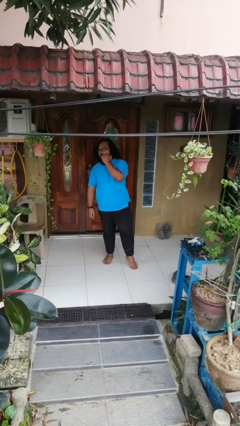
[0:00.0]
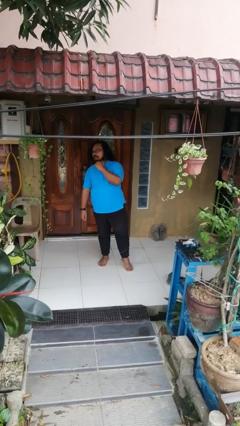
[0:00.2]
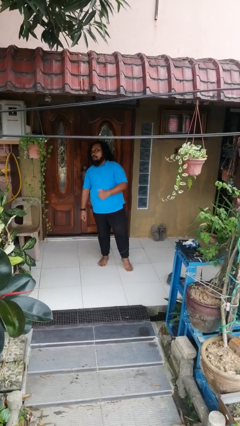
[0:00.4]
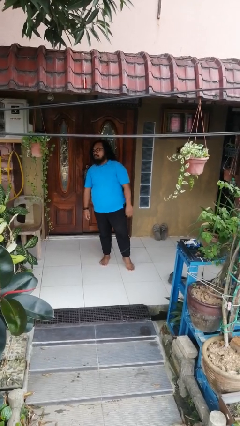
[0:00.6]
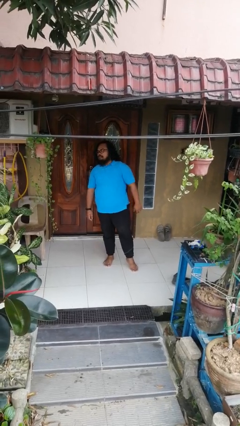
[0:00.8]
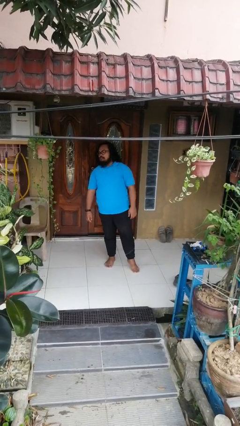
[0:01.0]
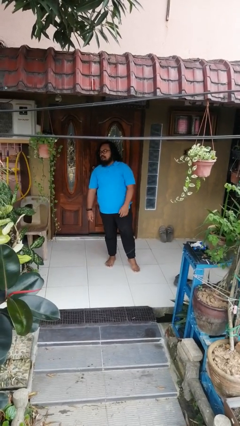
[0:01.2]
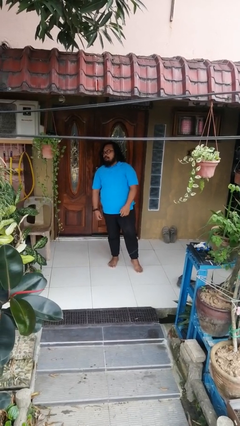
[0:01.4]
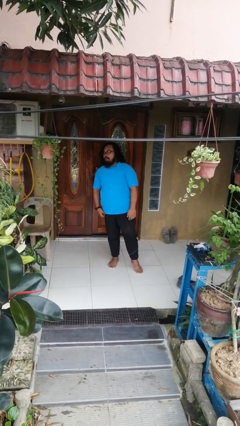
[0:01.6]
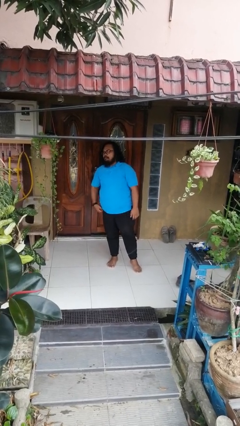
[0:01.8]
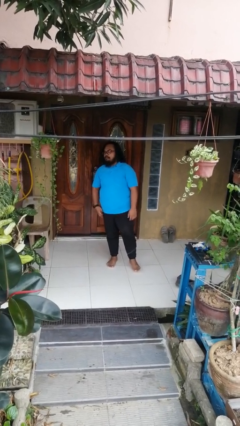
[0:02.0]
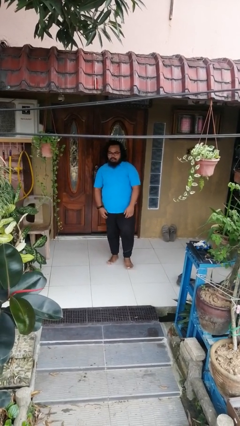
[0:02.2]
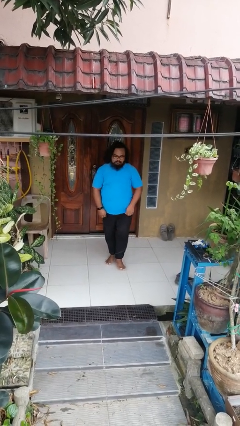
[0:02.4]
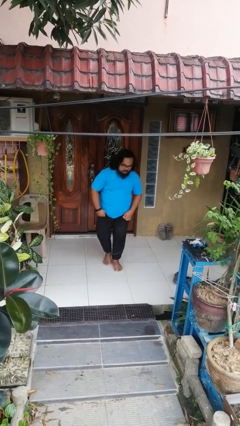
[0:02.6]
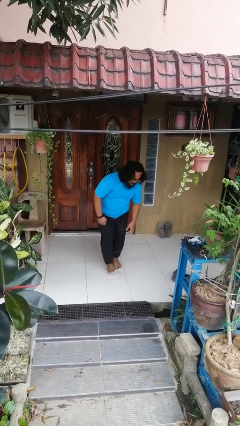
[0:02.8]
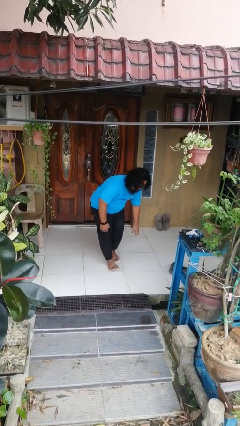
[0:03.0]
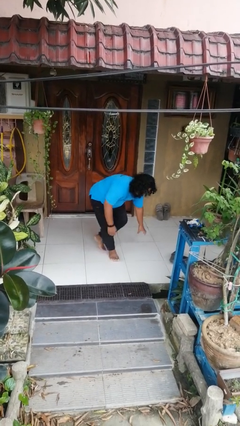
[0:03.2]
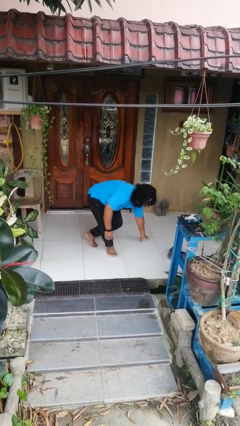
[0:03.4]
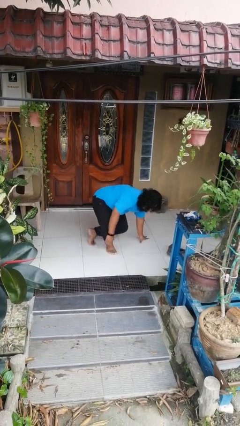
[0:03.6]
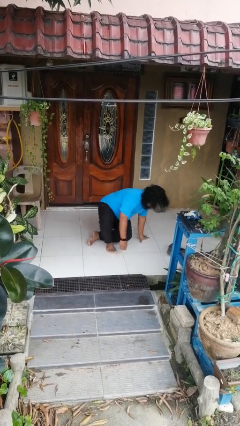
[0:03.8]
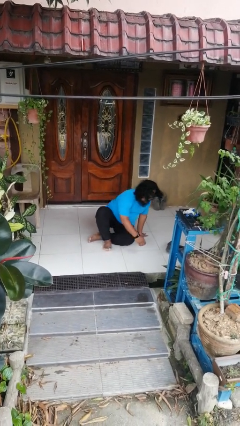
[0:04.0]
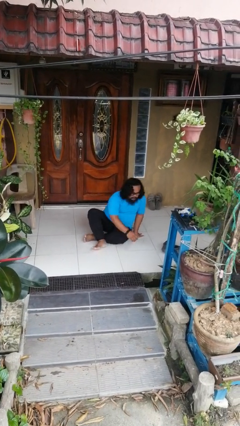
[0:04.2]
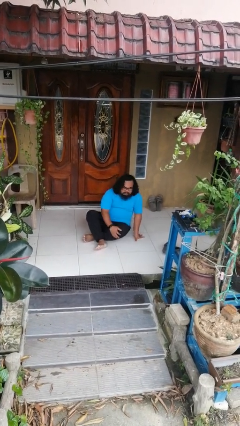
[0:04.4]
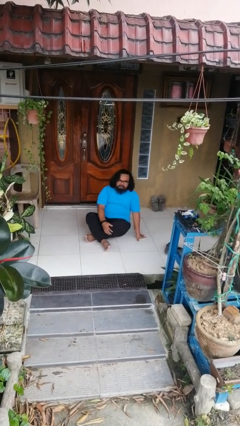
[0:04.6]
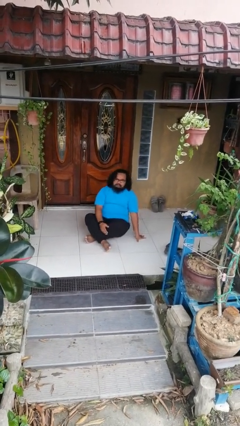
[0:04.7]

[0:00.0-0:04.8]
person sits crisscross

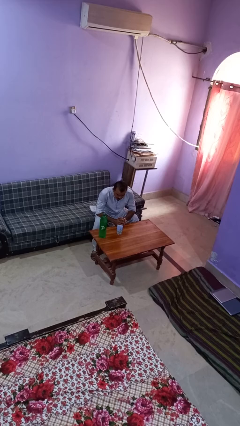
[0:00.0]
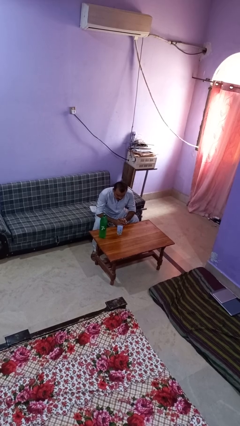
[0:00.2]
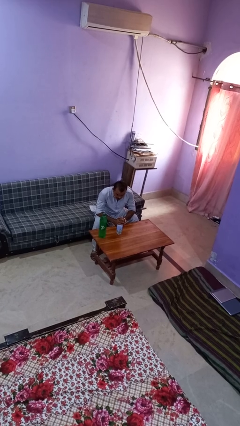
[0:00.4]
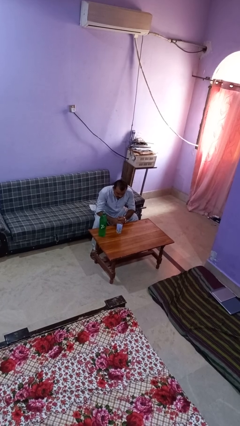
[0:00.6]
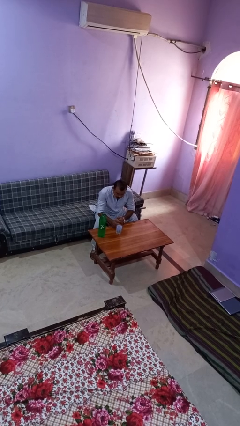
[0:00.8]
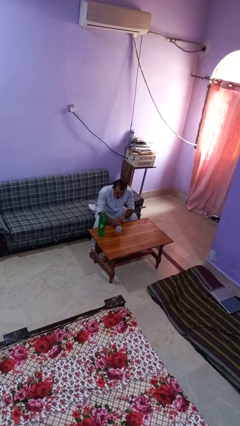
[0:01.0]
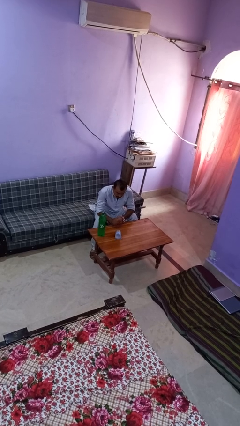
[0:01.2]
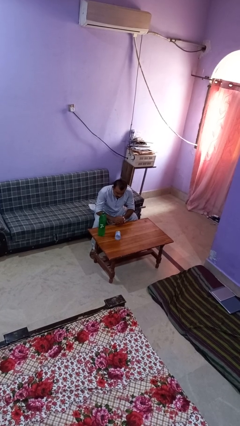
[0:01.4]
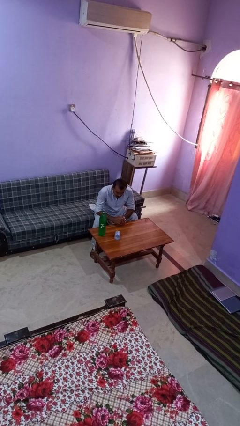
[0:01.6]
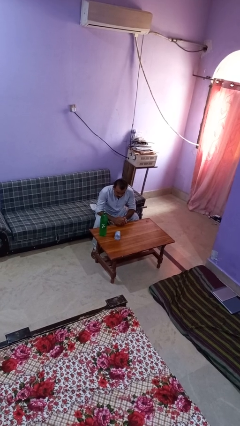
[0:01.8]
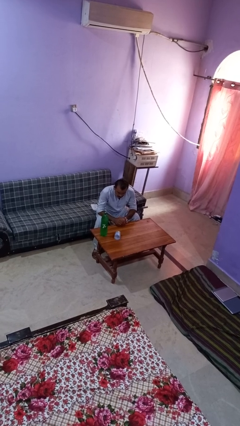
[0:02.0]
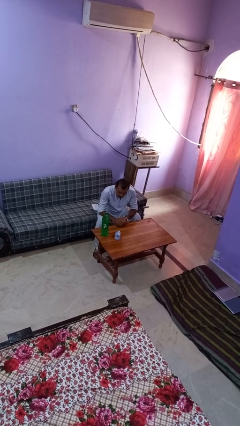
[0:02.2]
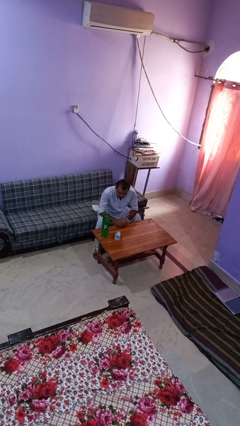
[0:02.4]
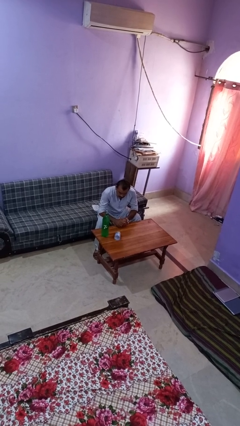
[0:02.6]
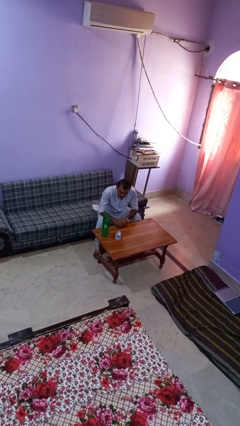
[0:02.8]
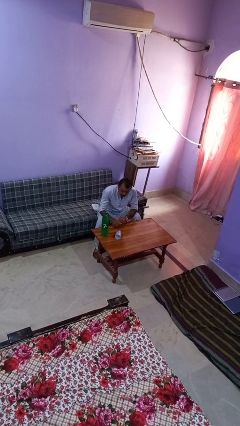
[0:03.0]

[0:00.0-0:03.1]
person knocks over glass

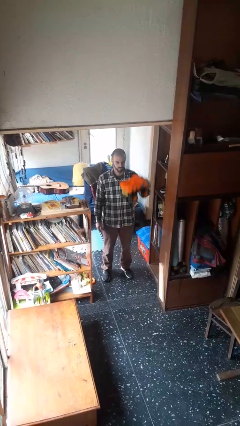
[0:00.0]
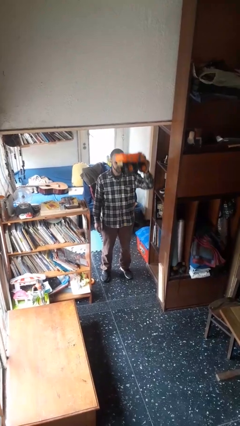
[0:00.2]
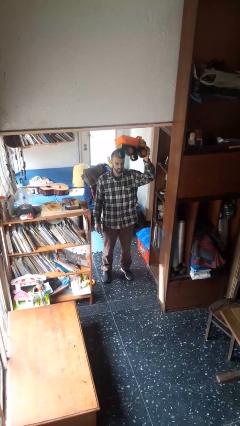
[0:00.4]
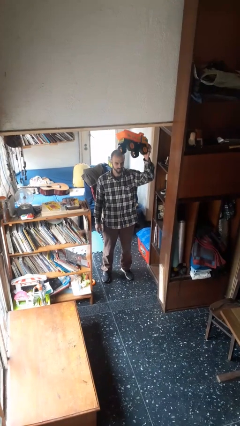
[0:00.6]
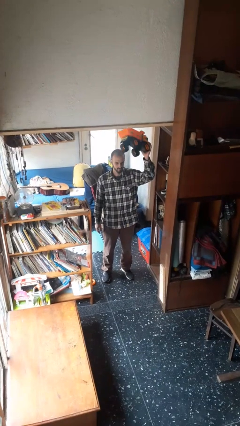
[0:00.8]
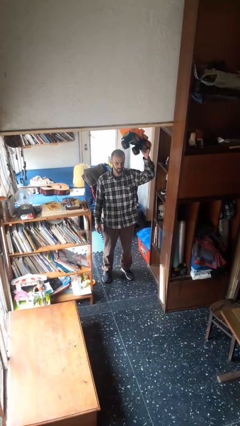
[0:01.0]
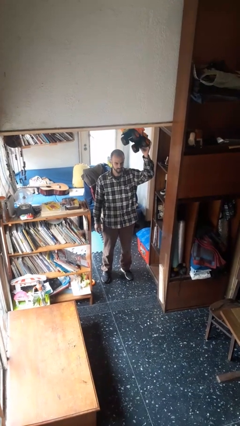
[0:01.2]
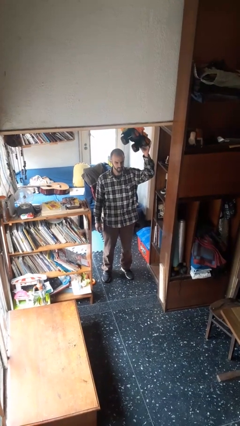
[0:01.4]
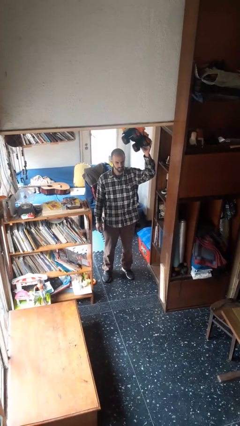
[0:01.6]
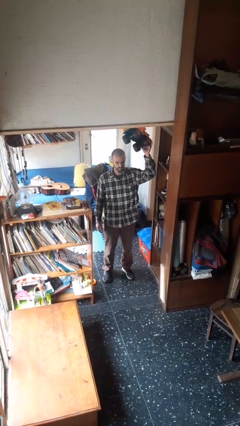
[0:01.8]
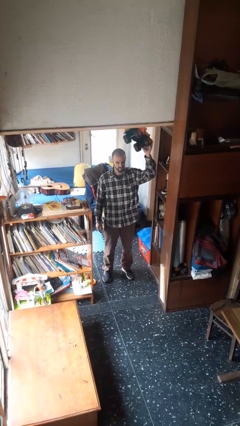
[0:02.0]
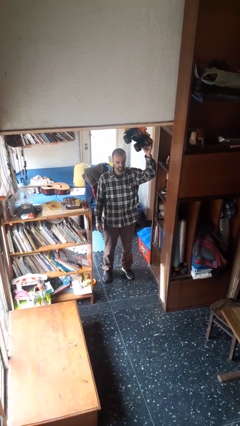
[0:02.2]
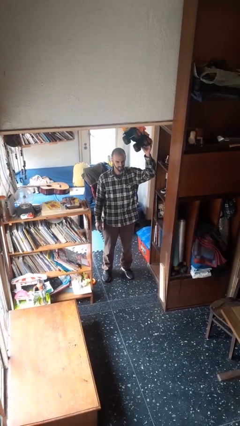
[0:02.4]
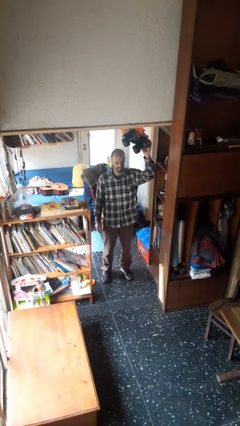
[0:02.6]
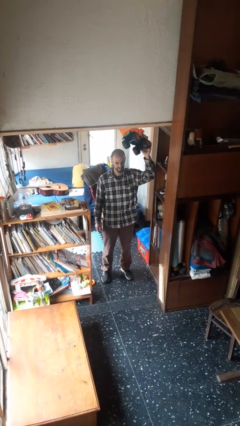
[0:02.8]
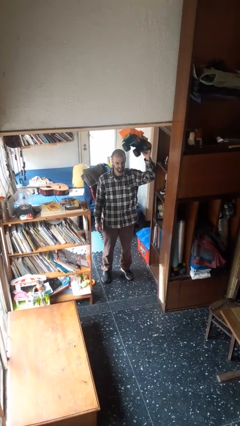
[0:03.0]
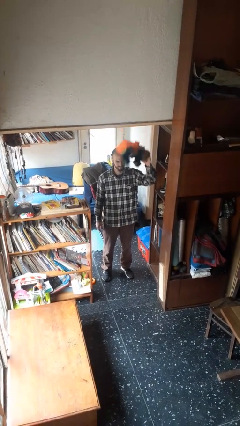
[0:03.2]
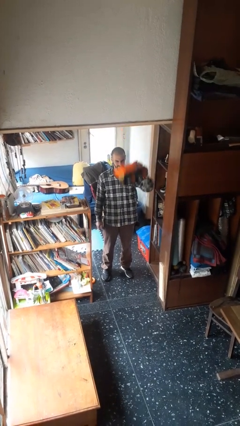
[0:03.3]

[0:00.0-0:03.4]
person holds object above head

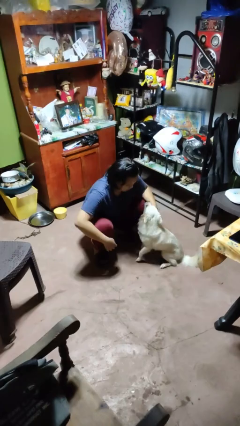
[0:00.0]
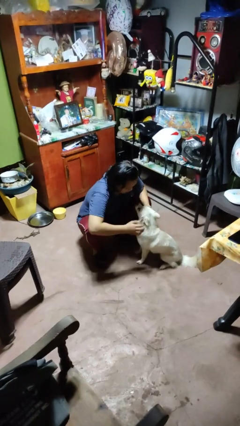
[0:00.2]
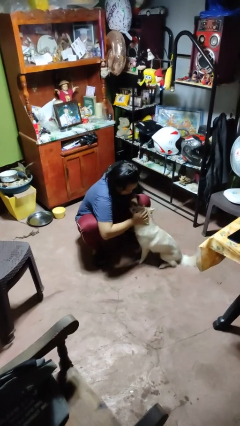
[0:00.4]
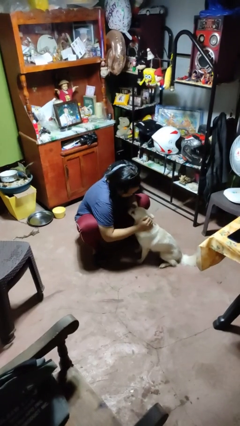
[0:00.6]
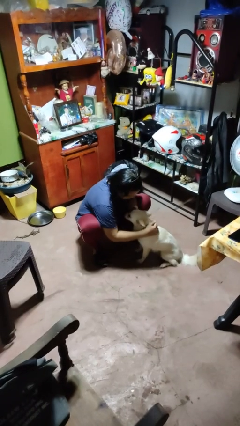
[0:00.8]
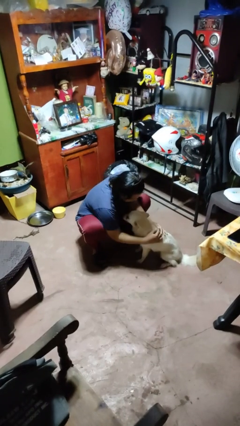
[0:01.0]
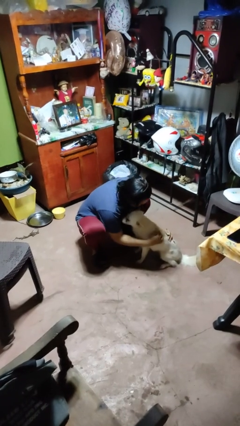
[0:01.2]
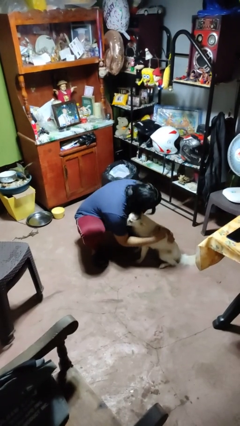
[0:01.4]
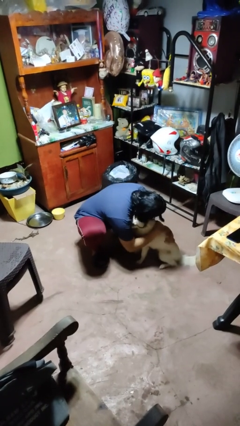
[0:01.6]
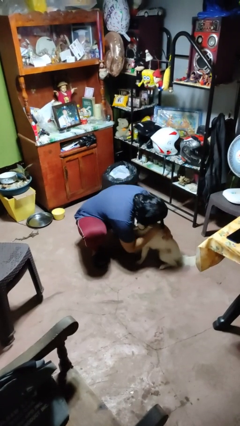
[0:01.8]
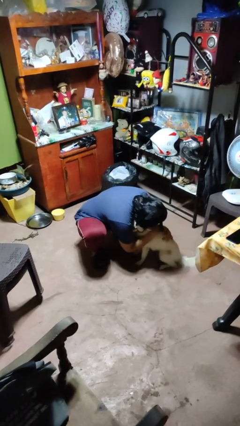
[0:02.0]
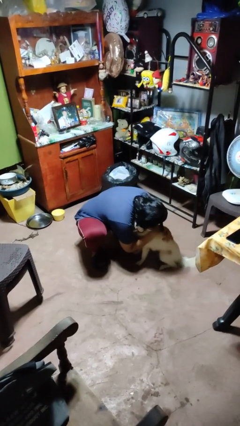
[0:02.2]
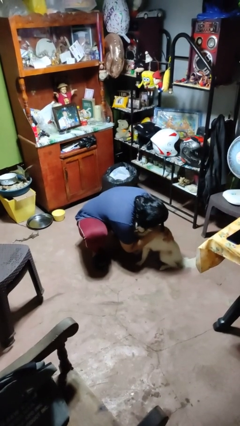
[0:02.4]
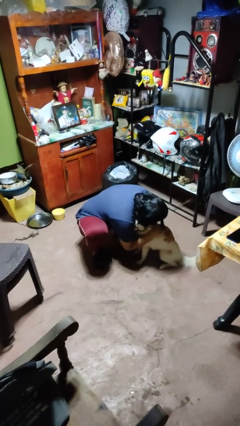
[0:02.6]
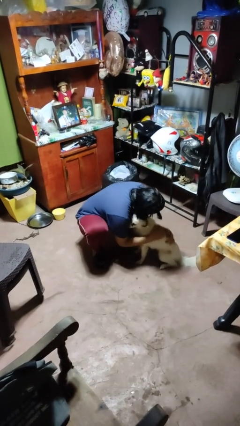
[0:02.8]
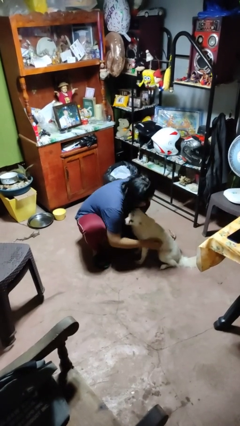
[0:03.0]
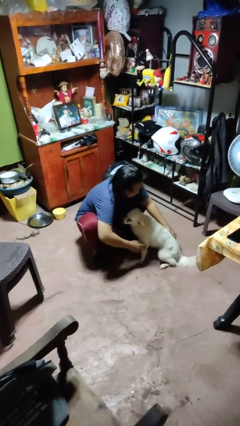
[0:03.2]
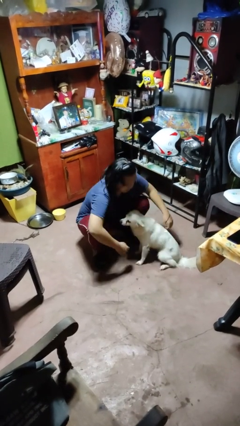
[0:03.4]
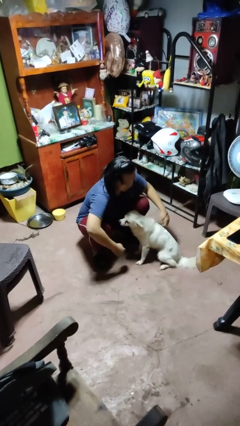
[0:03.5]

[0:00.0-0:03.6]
person hugs dog

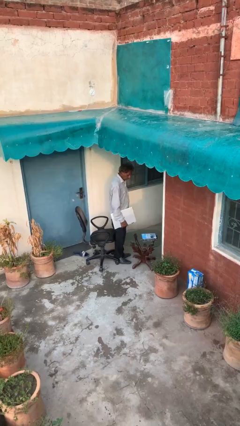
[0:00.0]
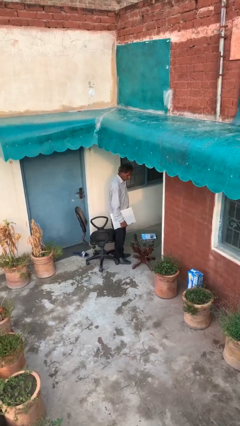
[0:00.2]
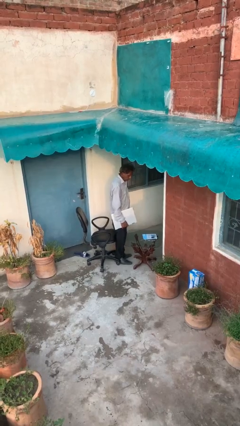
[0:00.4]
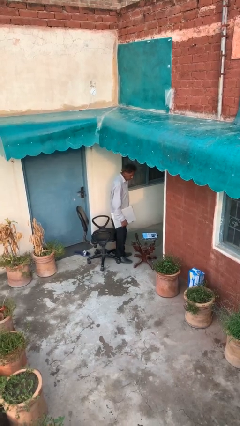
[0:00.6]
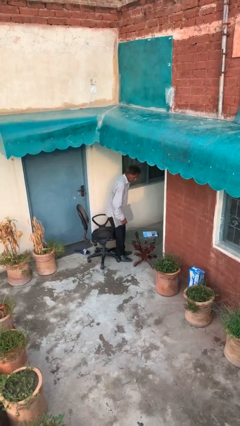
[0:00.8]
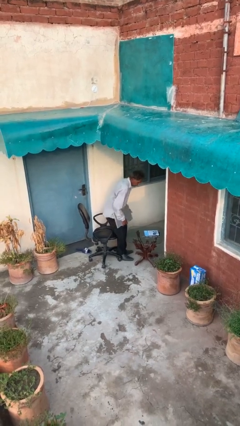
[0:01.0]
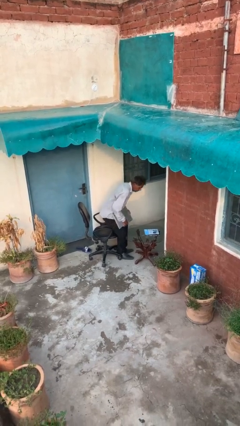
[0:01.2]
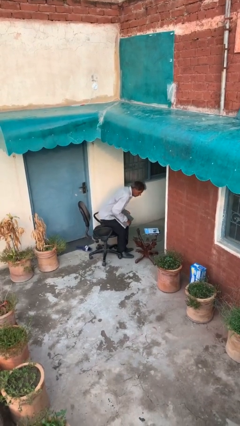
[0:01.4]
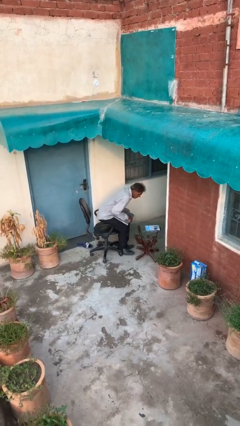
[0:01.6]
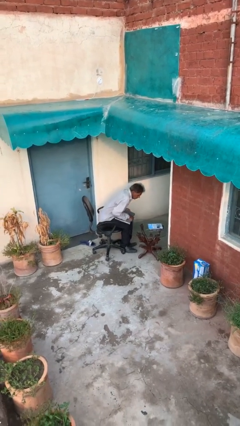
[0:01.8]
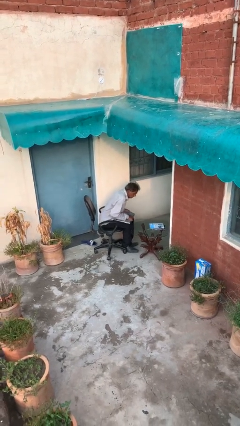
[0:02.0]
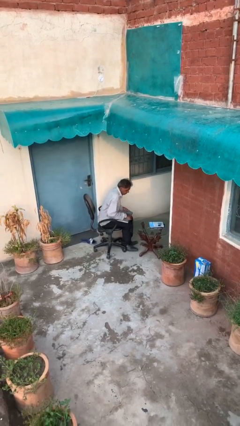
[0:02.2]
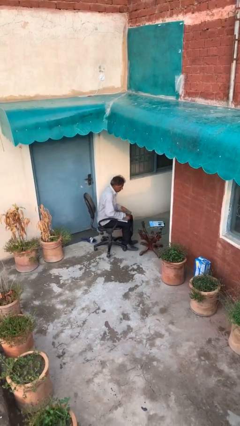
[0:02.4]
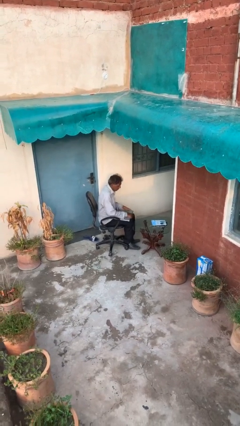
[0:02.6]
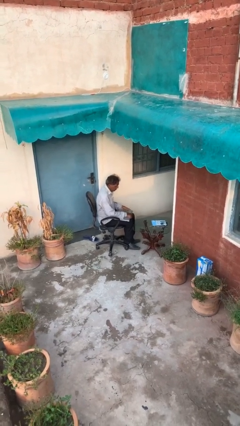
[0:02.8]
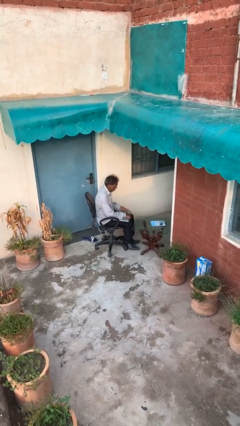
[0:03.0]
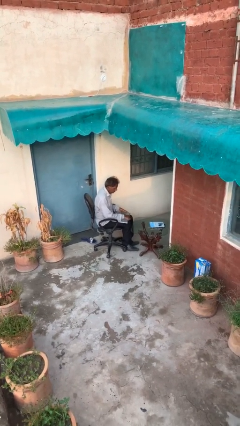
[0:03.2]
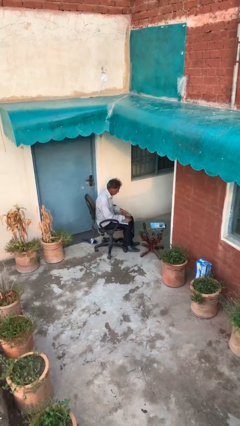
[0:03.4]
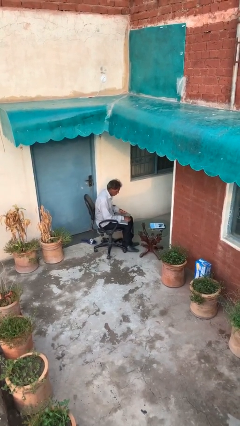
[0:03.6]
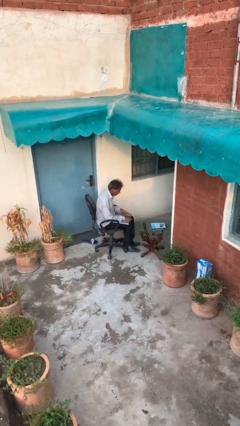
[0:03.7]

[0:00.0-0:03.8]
person sits down
